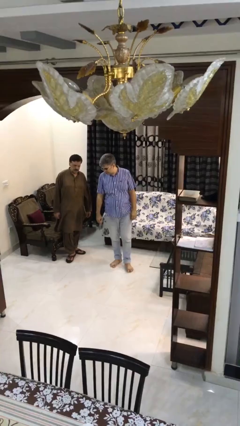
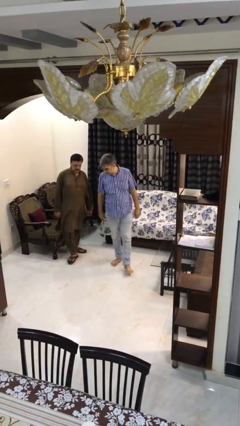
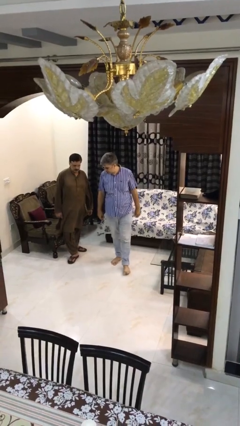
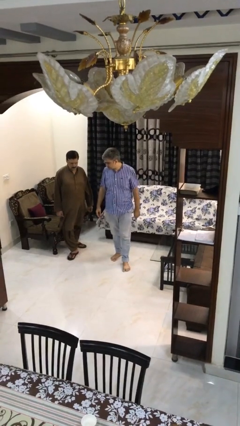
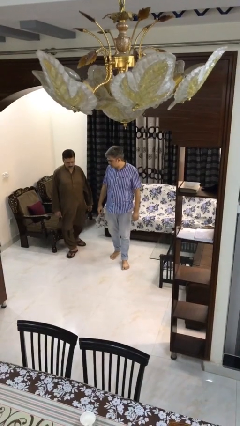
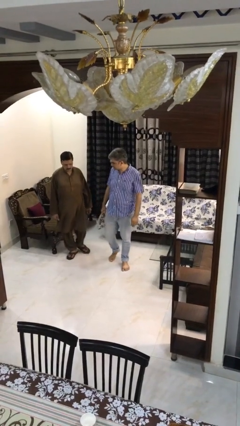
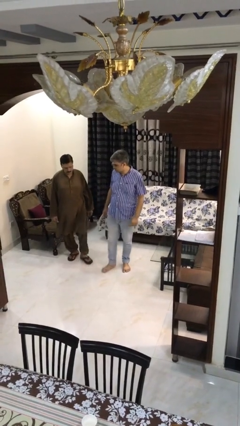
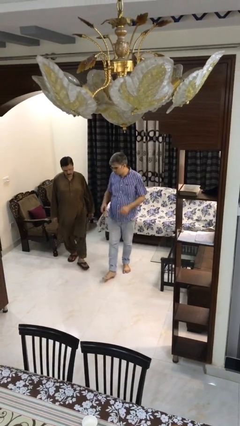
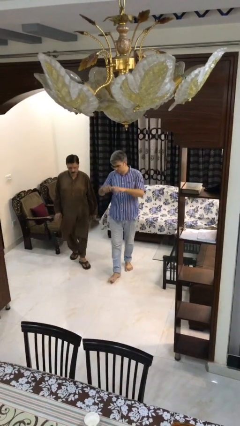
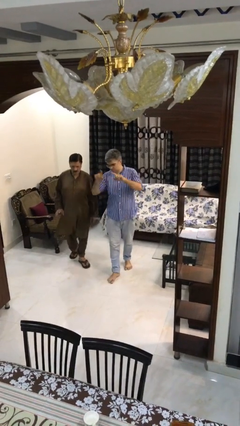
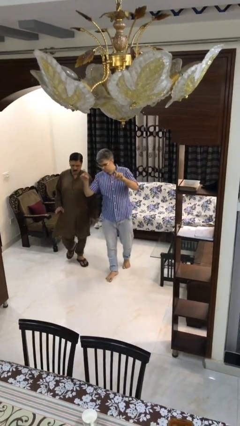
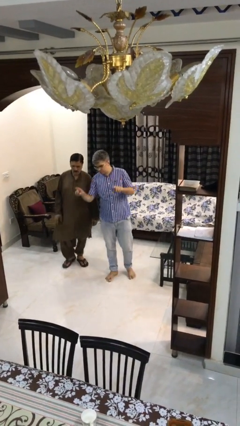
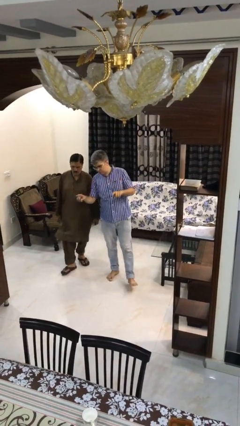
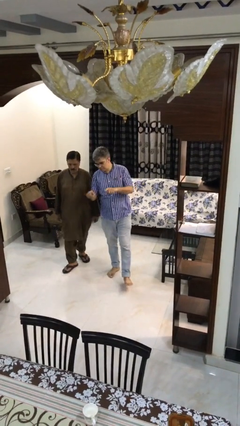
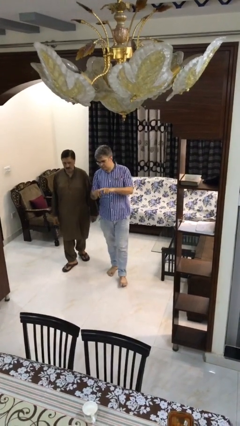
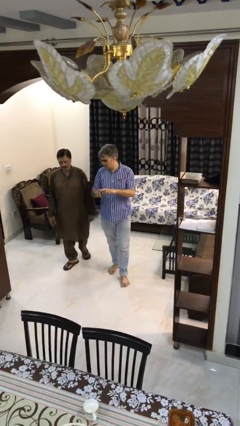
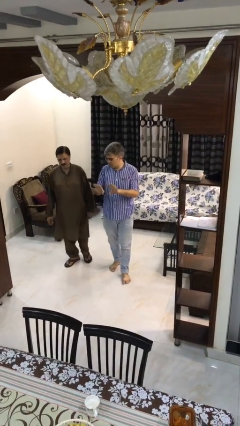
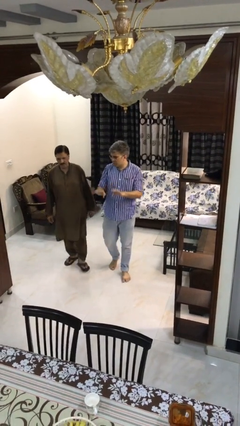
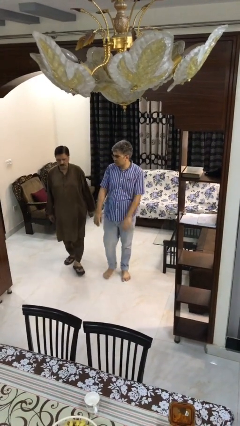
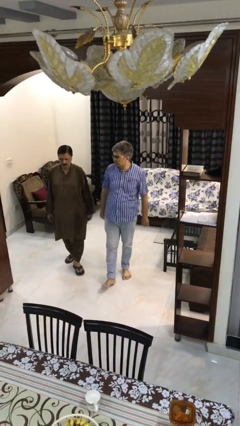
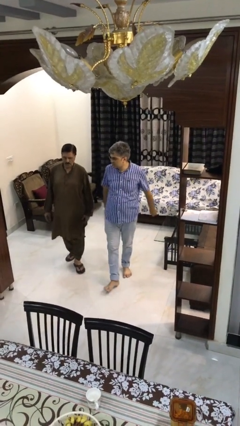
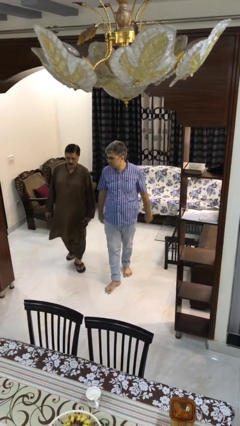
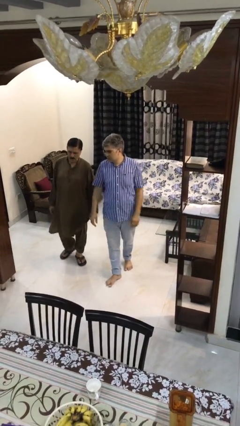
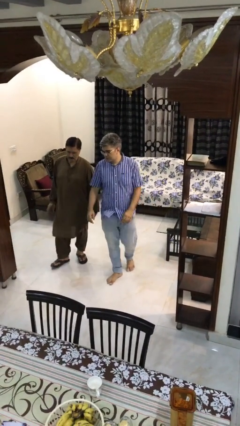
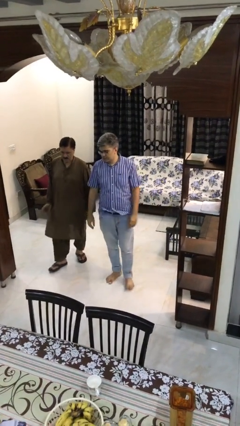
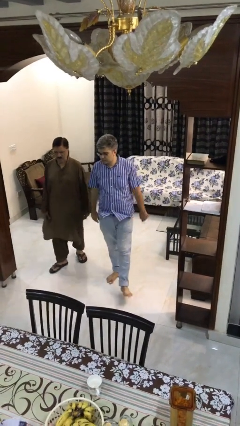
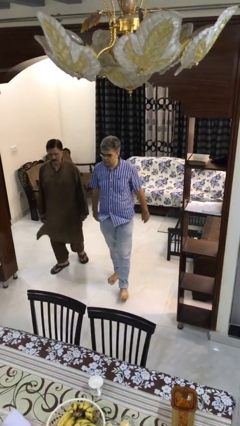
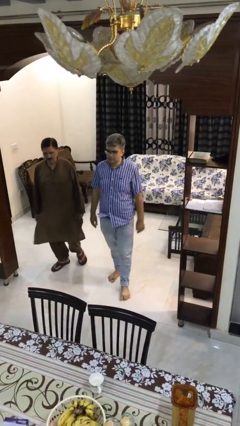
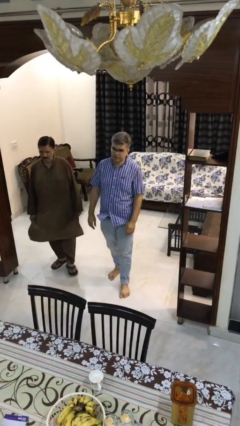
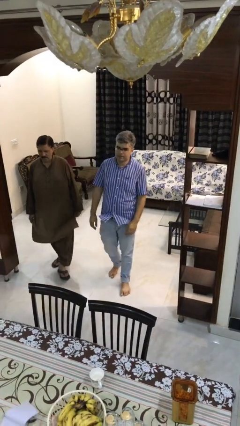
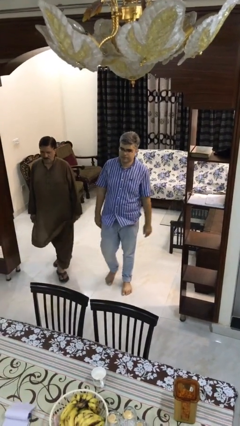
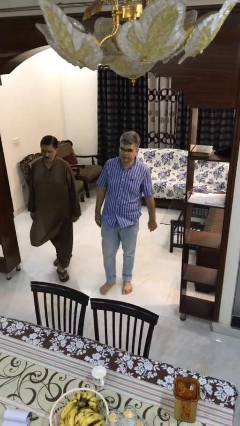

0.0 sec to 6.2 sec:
person talks to person

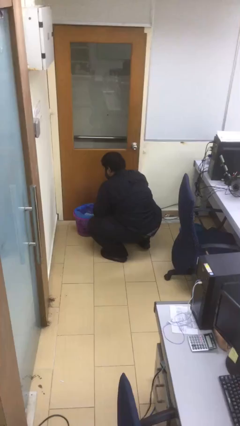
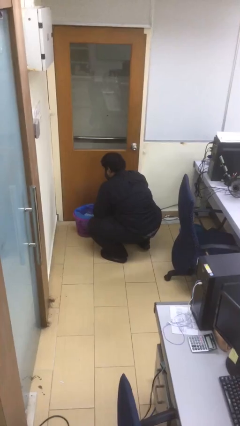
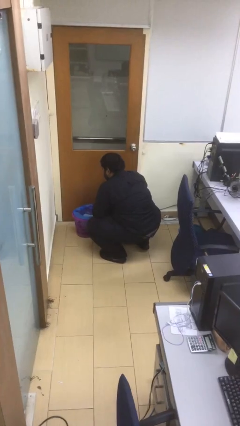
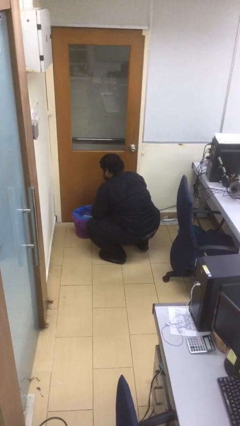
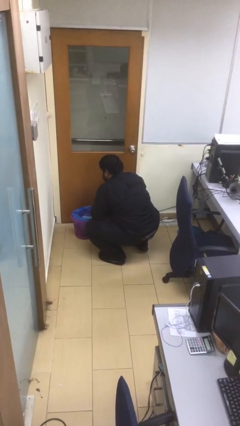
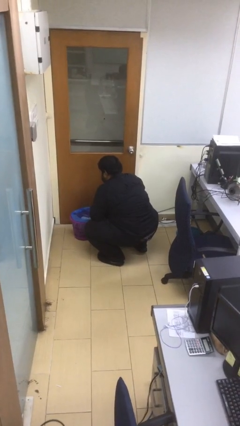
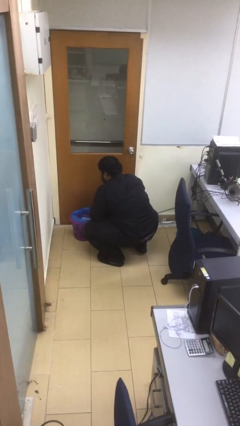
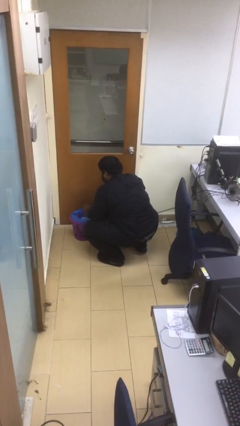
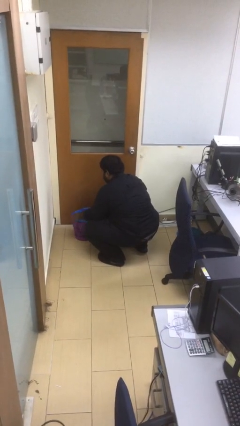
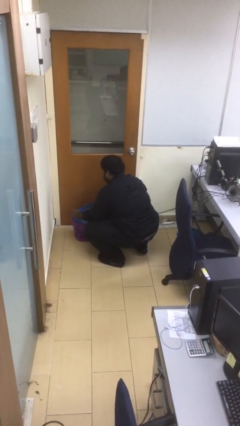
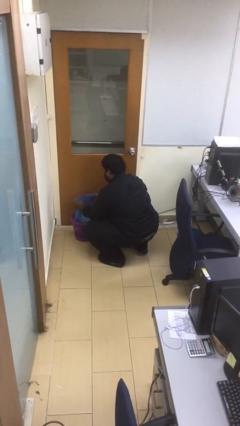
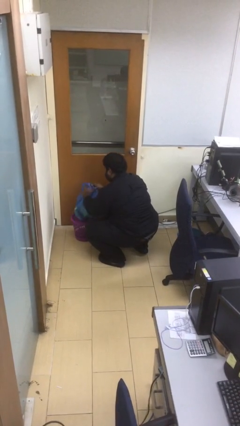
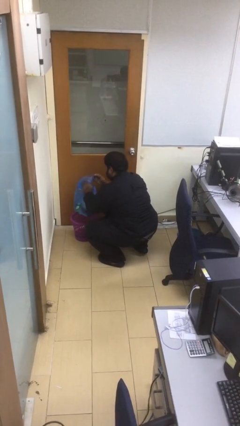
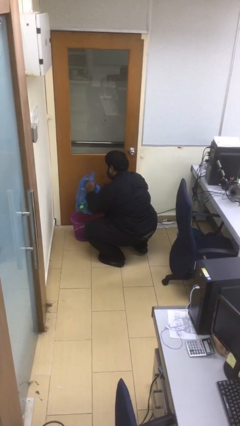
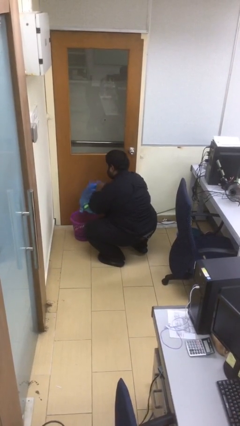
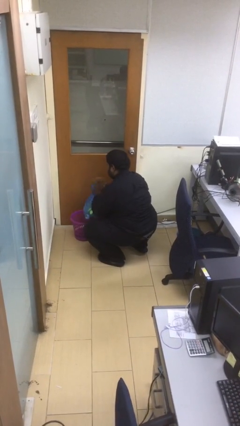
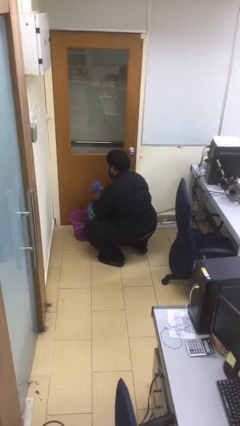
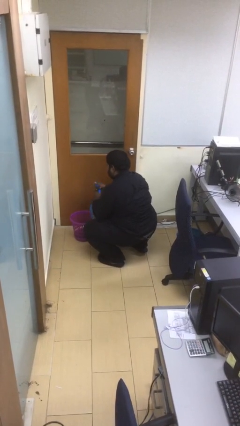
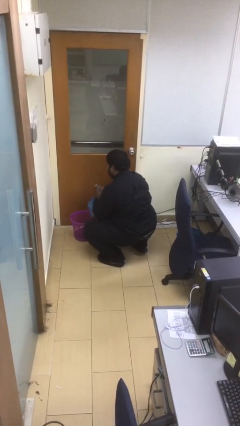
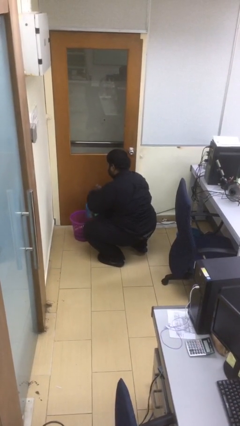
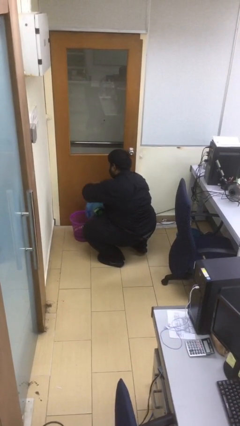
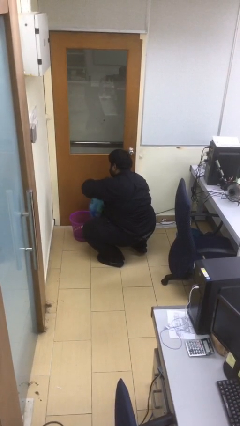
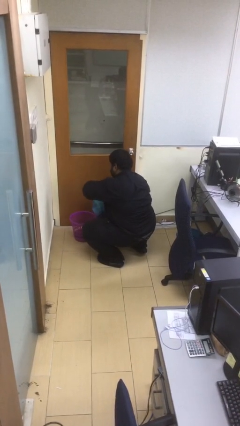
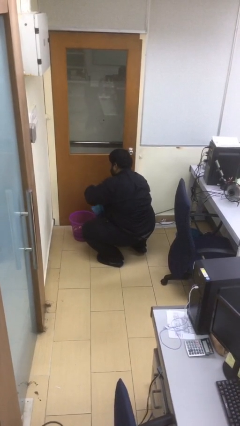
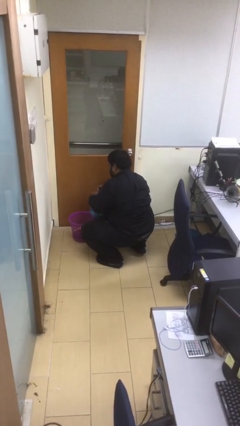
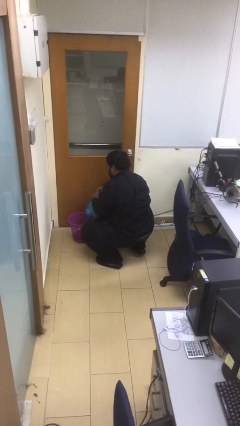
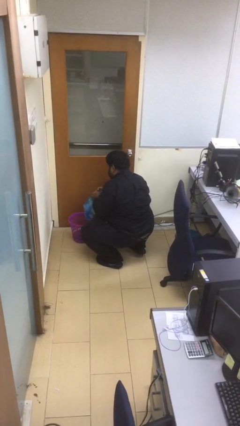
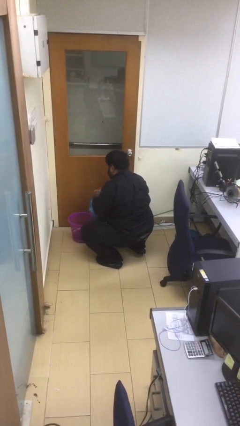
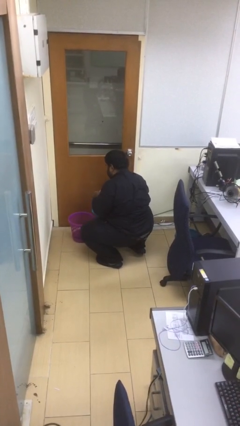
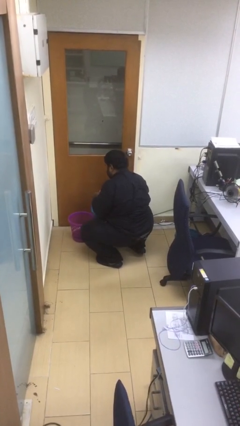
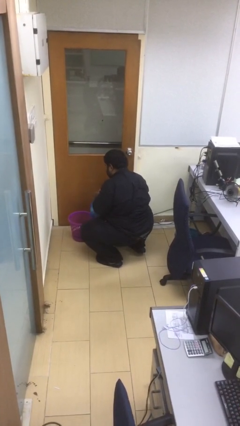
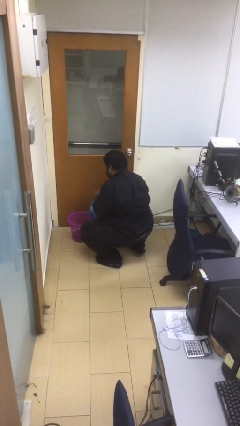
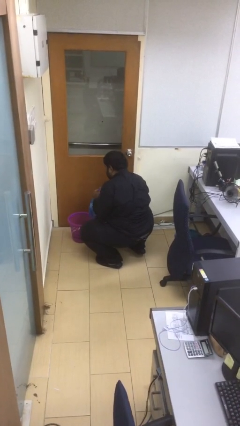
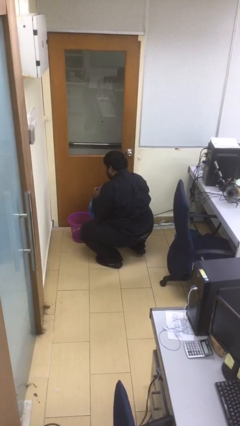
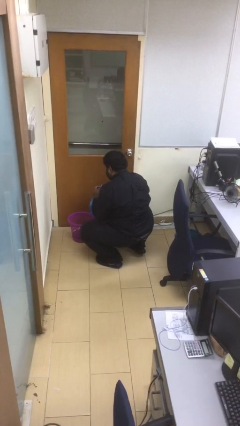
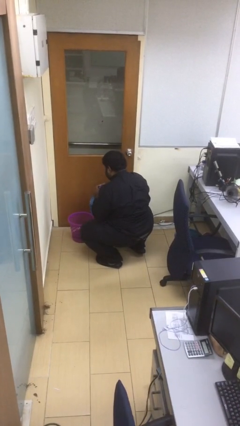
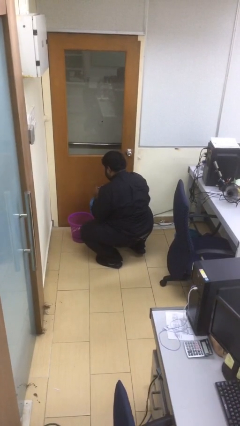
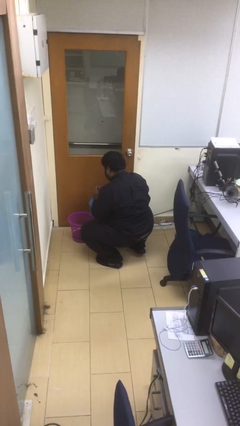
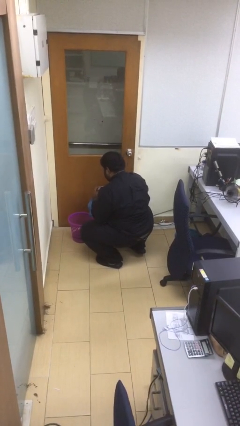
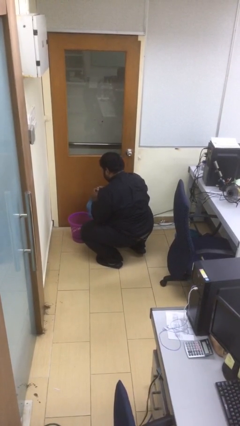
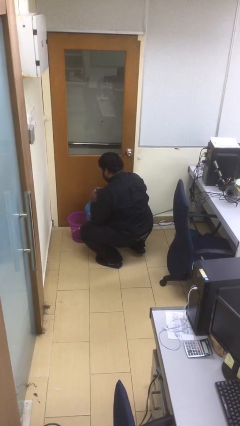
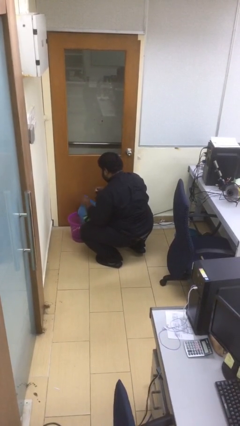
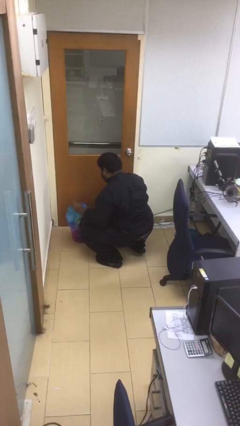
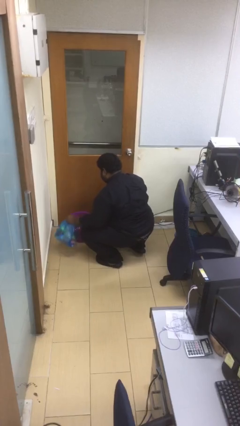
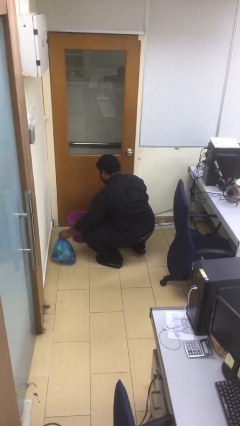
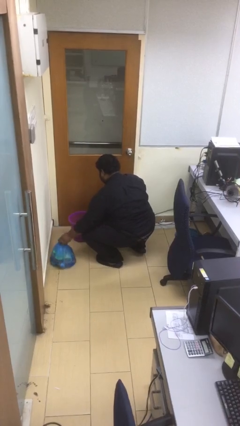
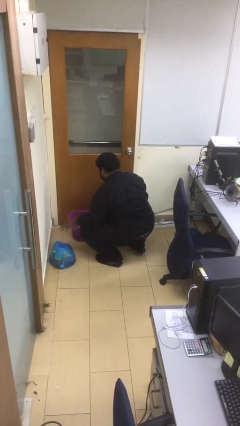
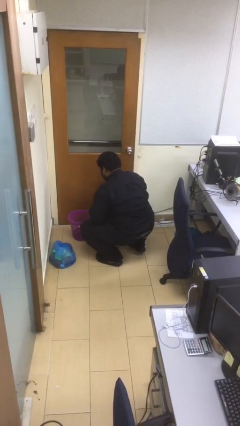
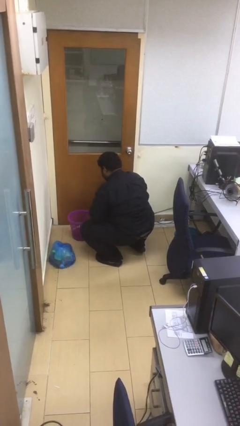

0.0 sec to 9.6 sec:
person removes trashbag from trashcan

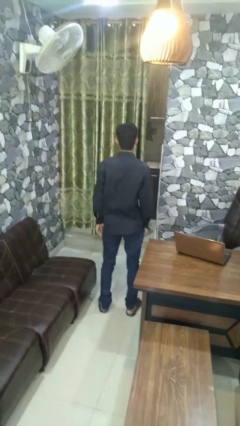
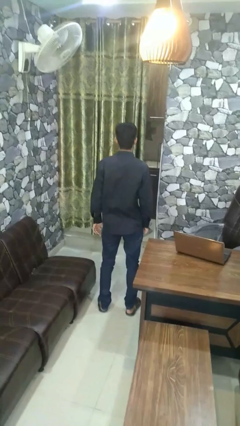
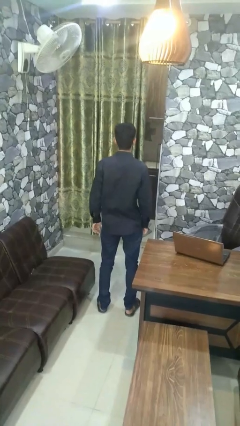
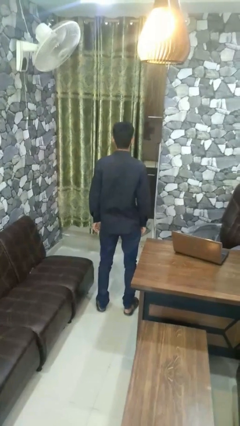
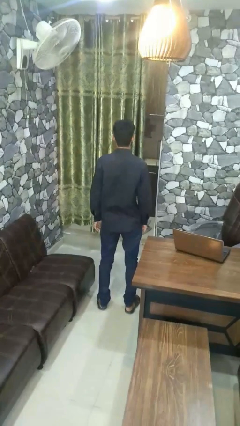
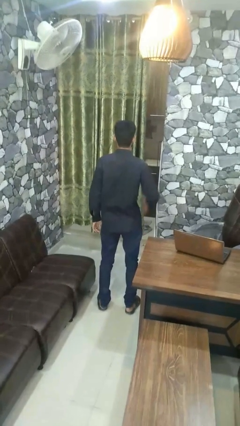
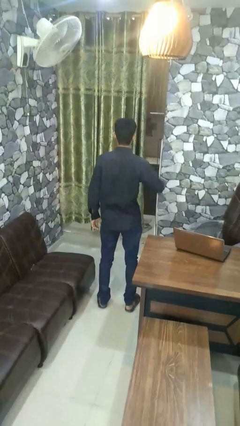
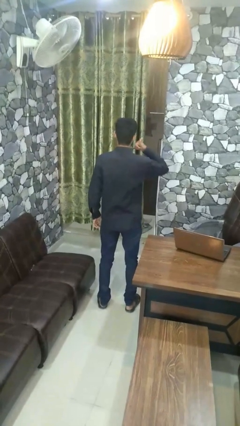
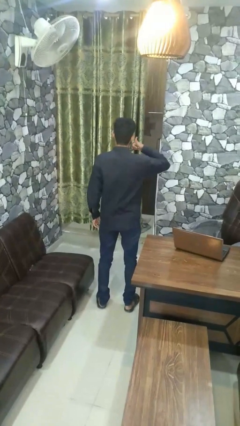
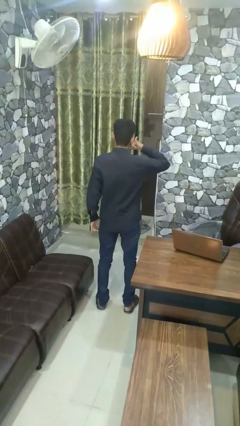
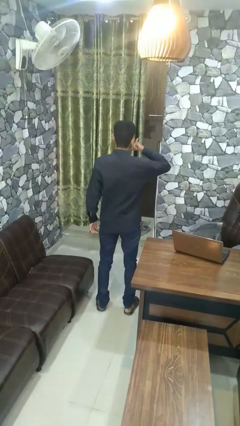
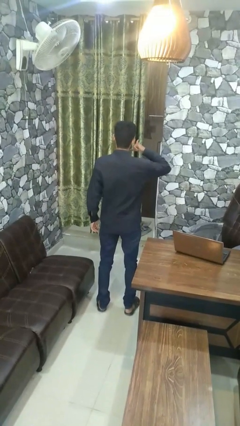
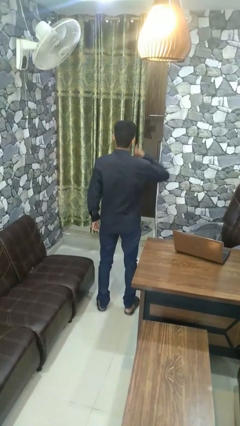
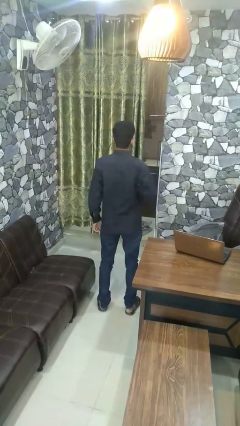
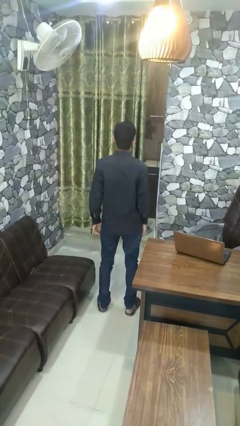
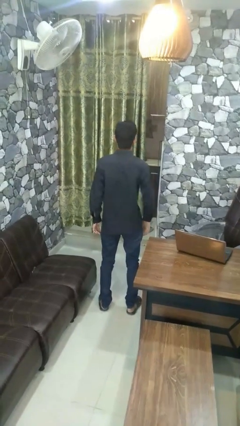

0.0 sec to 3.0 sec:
person gestures call me
